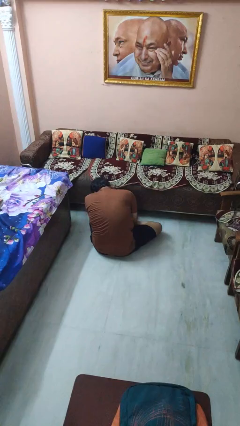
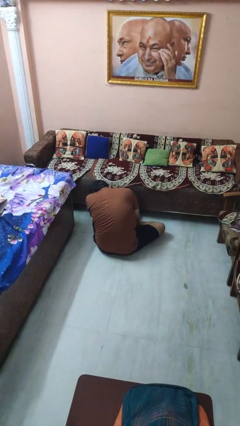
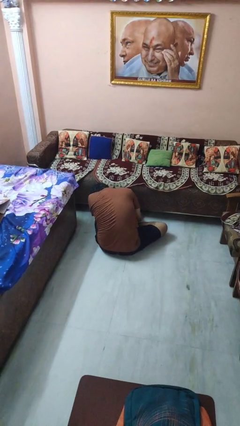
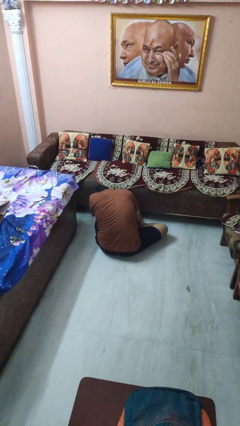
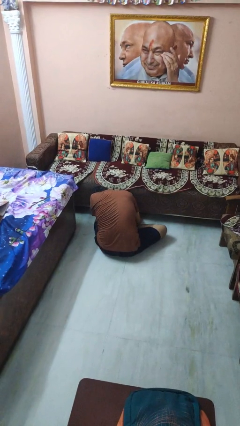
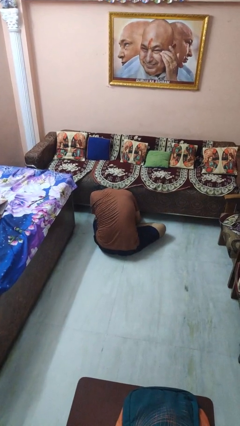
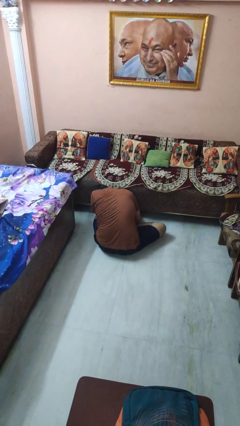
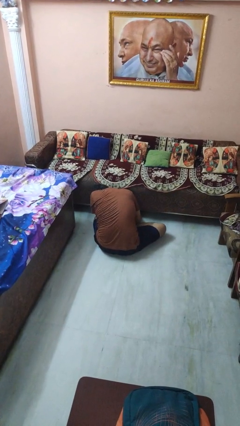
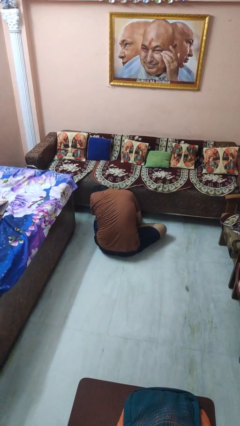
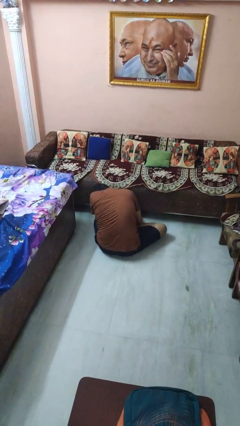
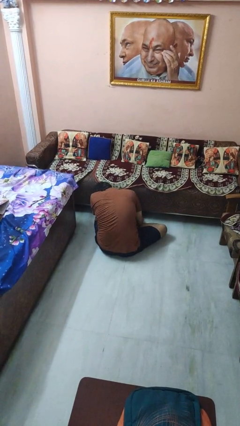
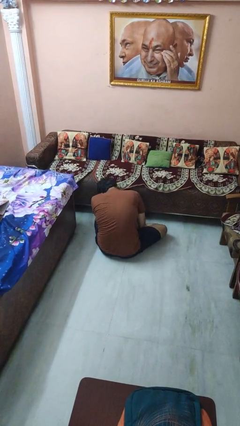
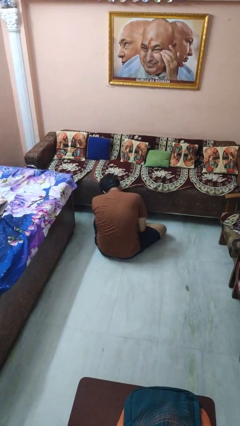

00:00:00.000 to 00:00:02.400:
person searches under couch

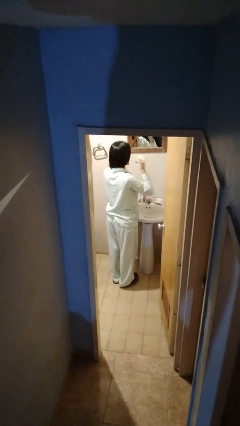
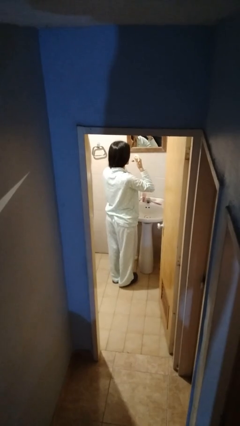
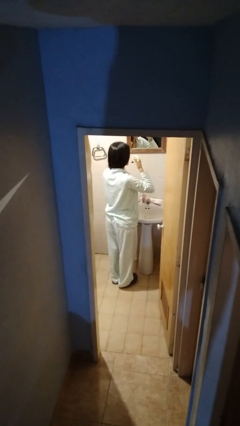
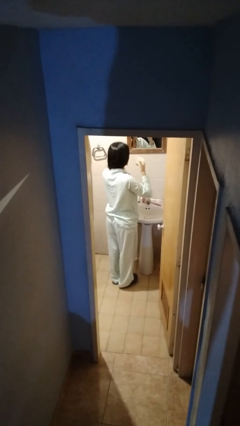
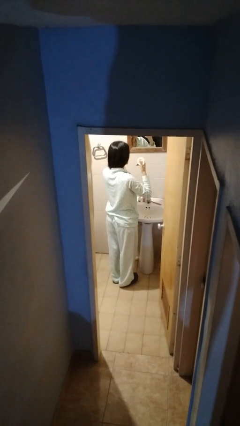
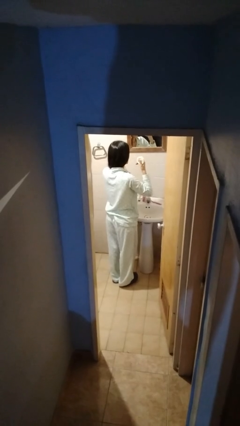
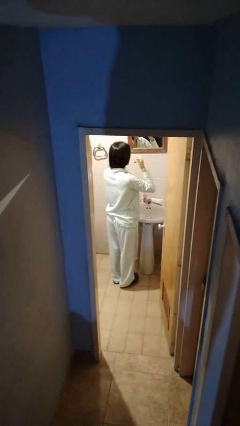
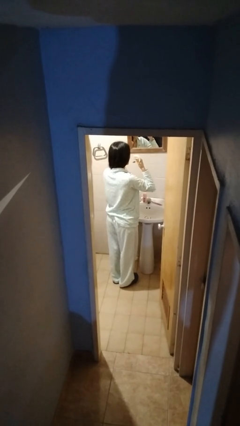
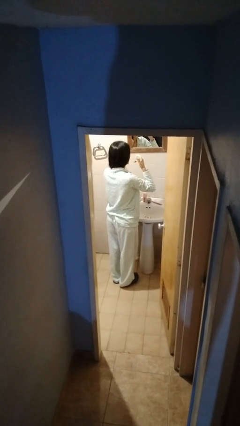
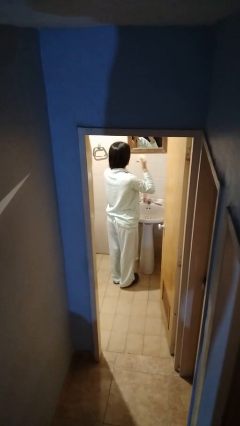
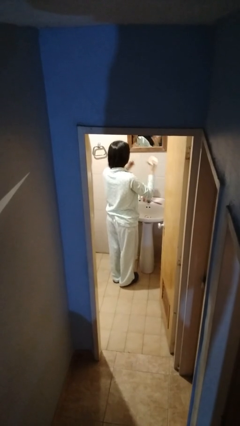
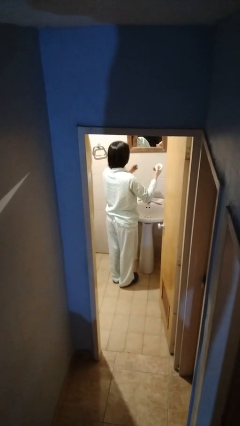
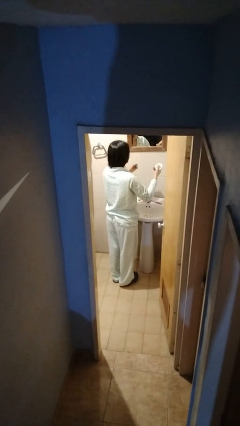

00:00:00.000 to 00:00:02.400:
person flosses

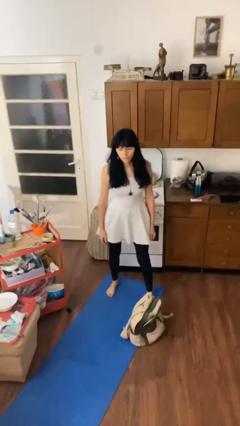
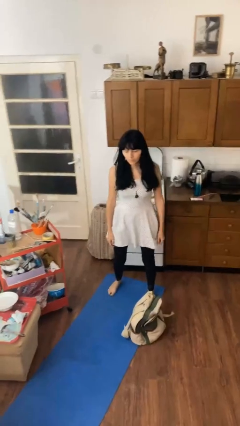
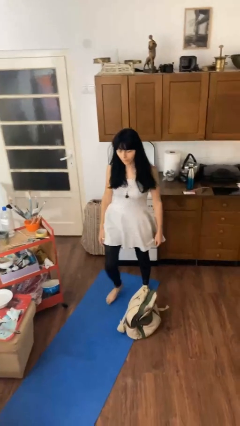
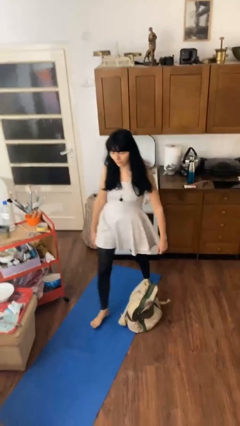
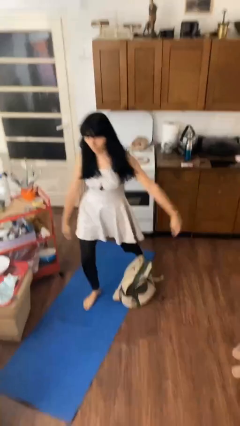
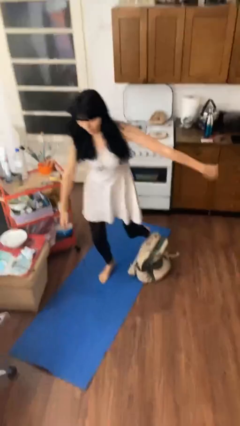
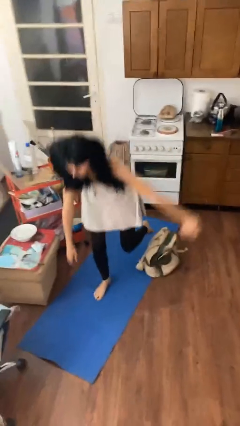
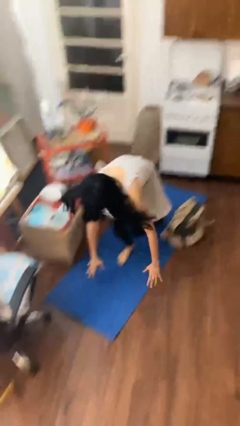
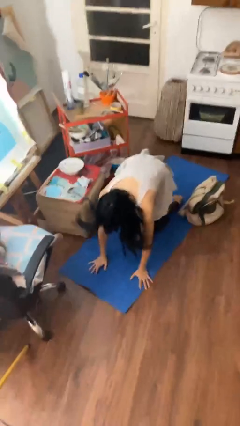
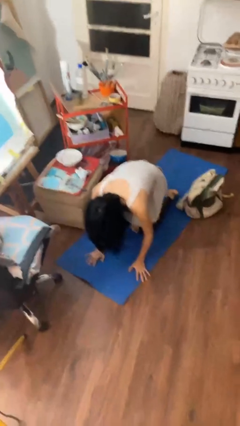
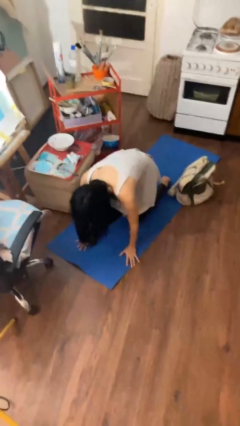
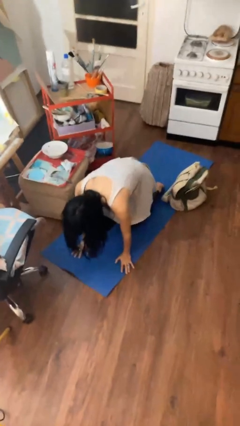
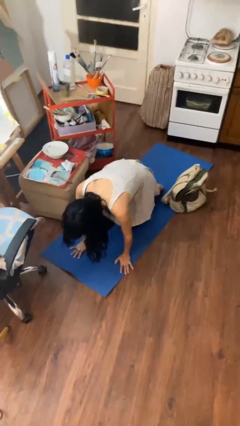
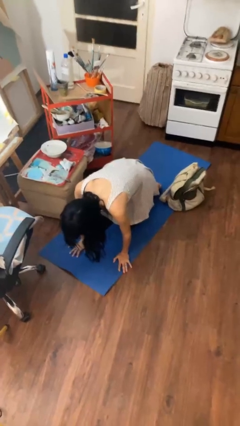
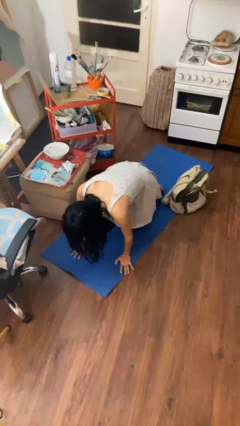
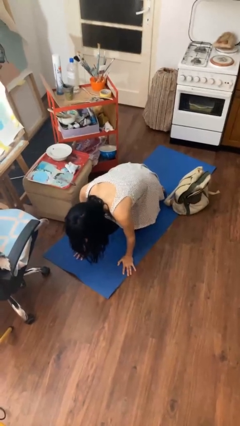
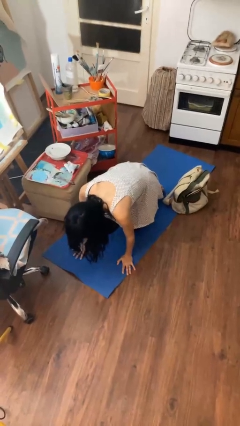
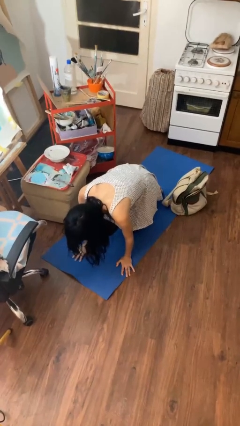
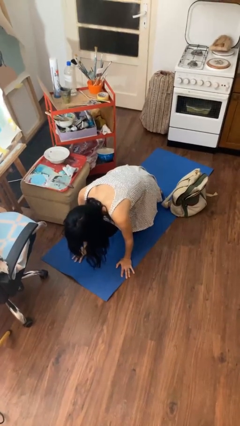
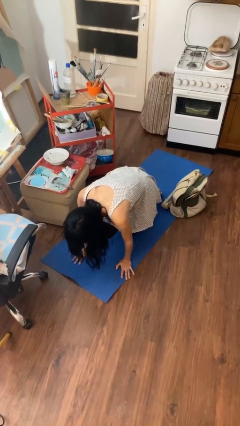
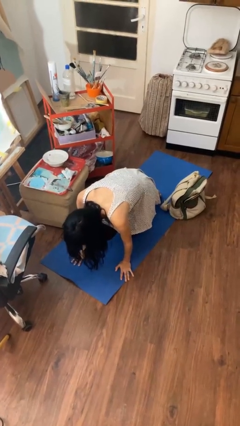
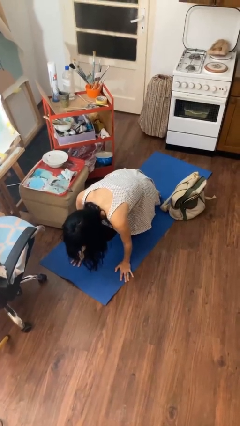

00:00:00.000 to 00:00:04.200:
person trips on object on floor

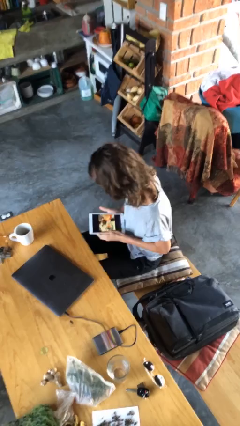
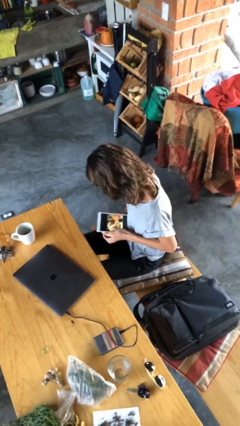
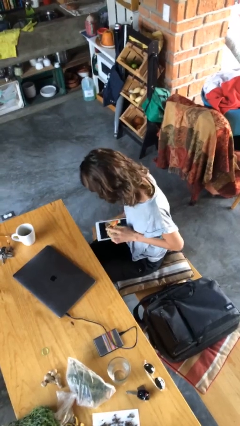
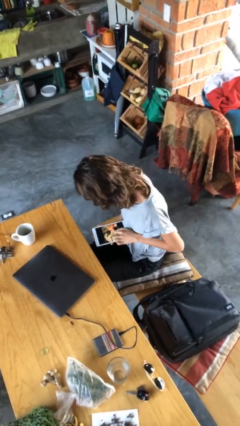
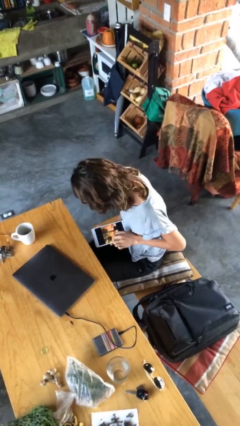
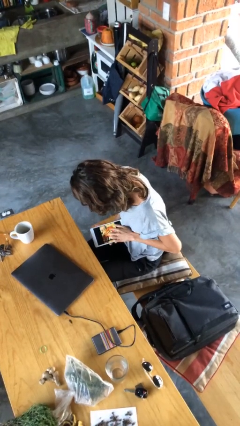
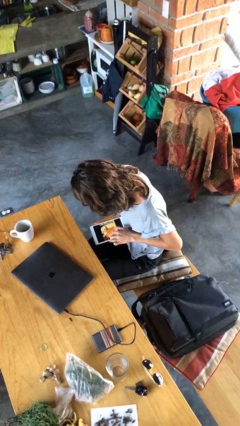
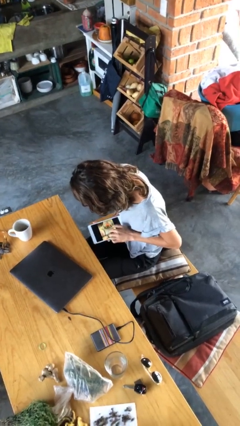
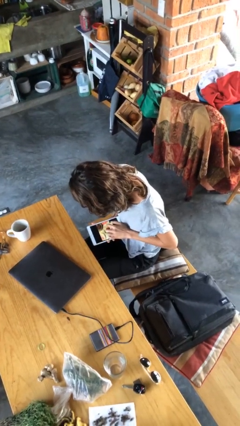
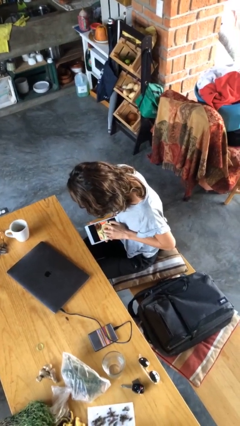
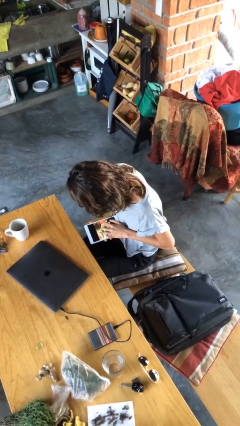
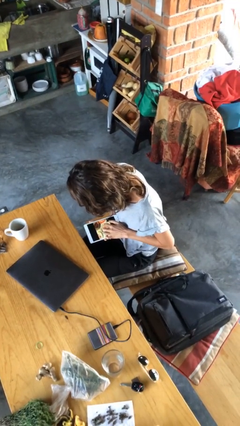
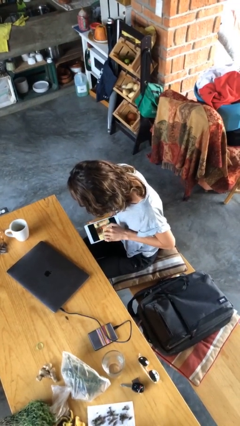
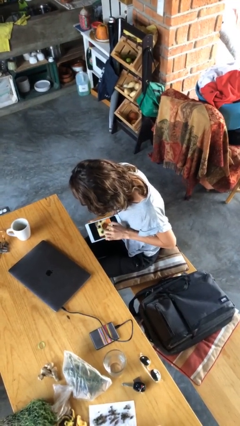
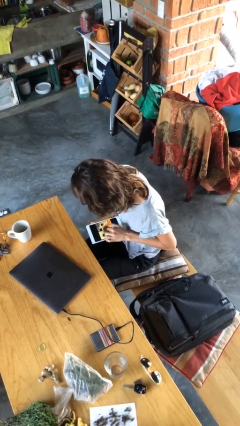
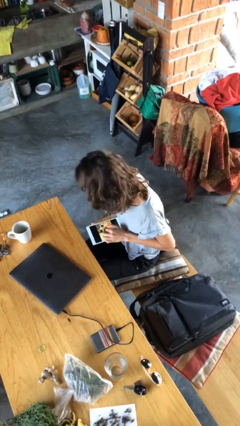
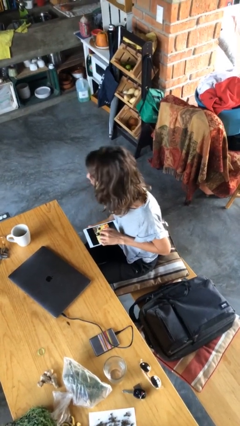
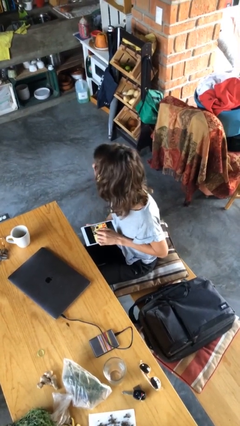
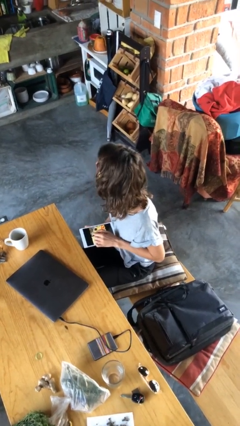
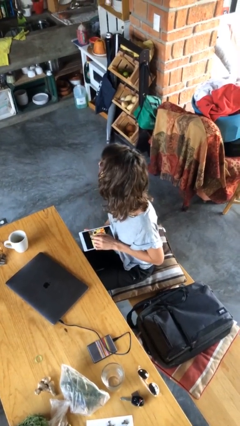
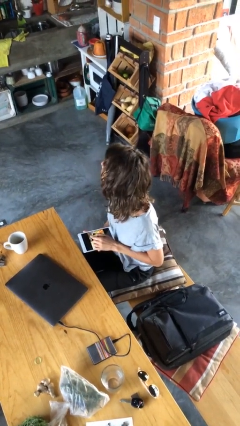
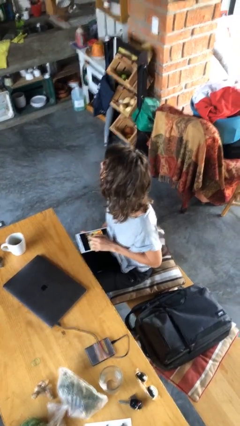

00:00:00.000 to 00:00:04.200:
person interacts with tablet

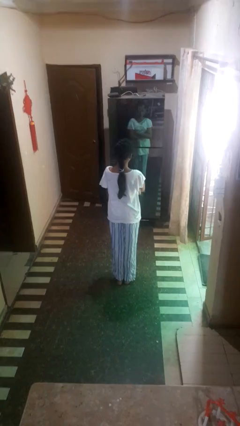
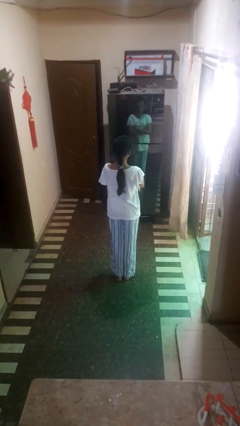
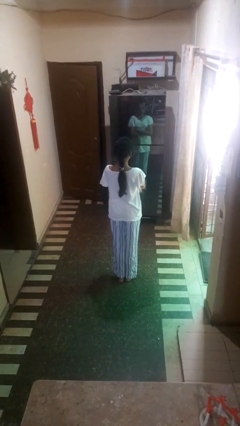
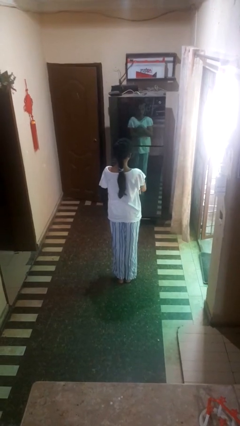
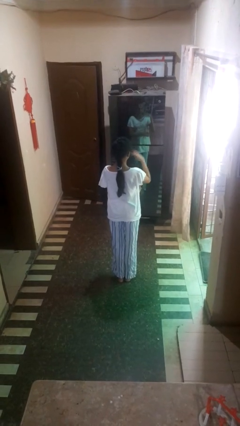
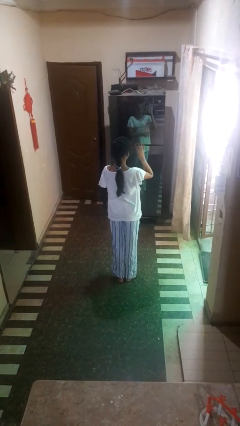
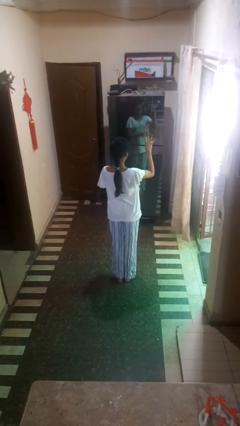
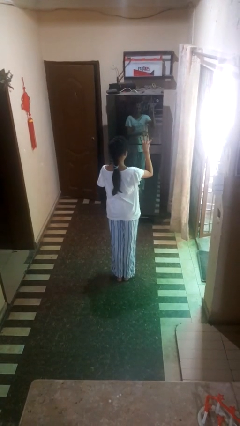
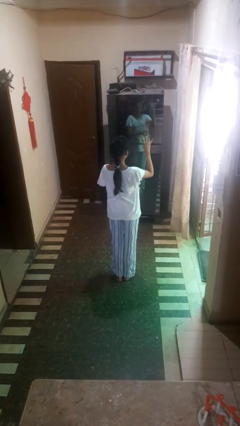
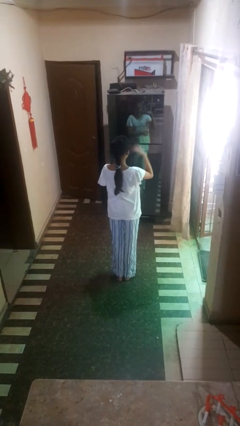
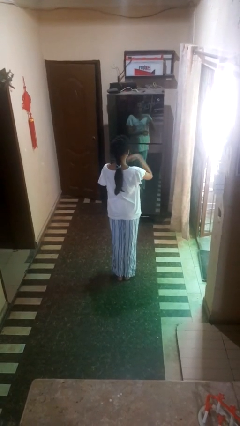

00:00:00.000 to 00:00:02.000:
person gestures number four

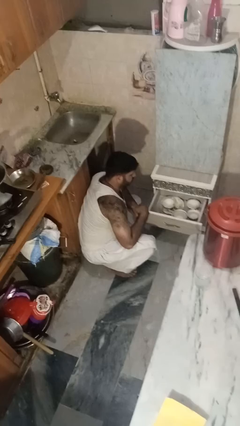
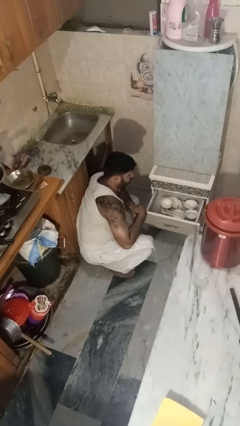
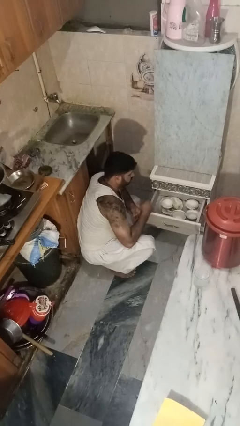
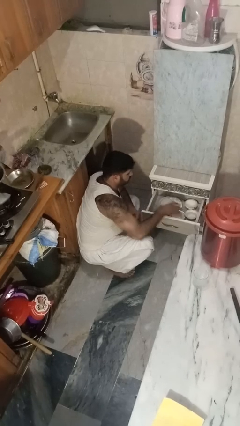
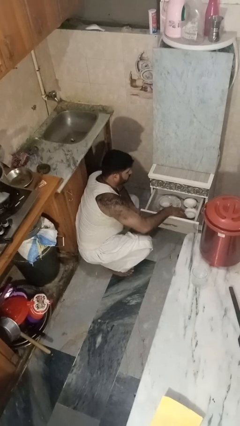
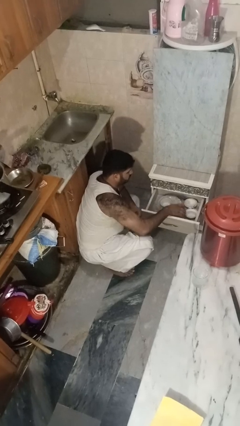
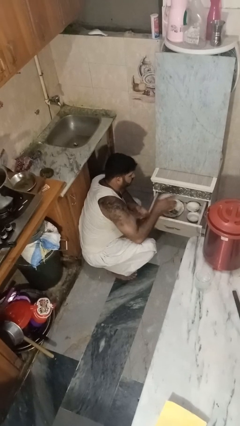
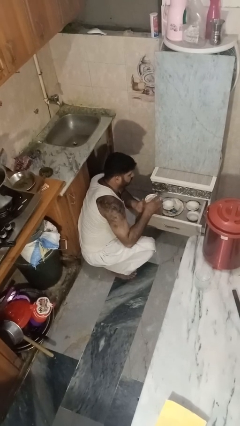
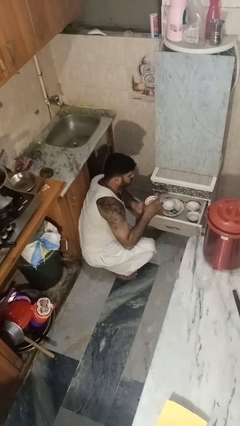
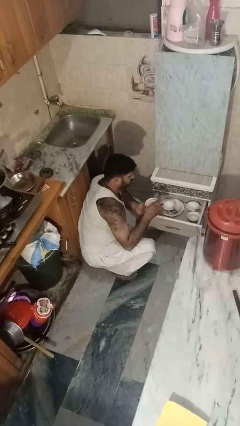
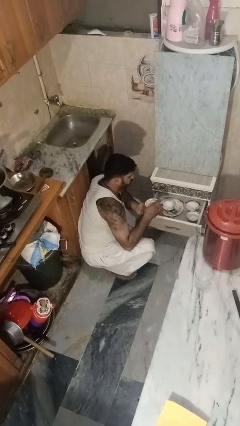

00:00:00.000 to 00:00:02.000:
person takes object from kitchen drawer
